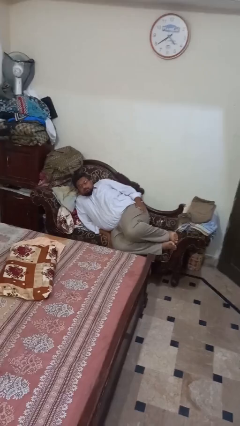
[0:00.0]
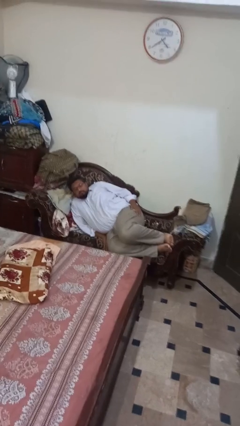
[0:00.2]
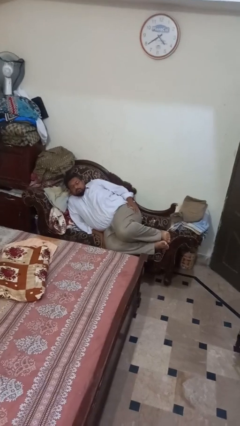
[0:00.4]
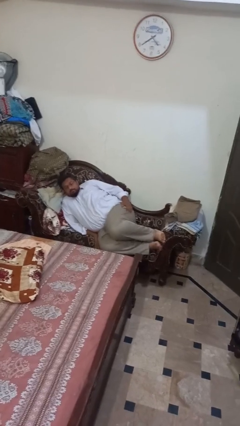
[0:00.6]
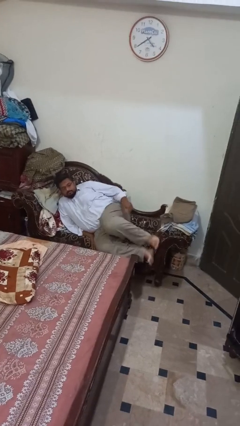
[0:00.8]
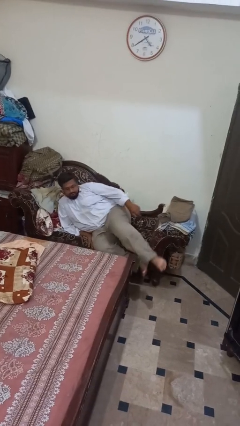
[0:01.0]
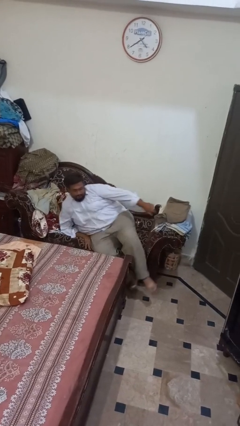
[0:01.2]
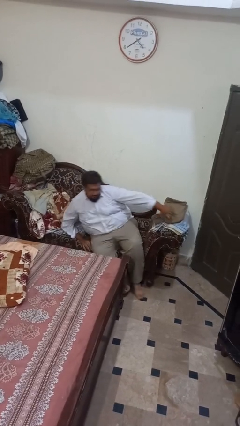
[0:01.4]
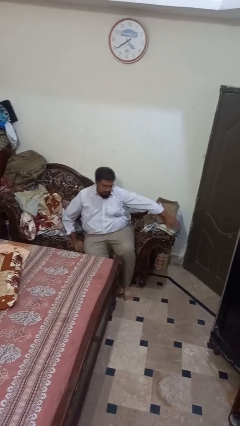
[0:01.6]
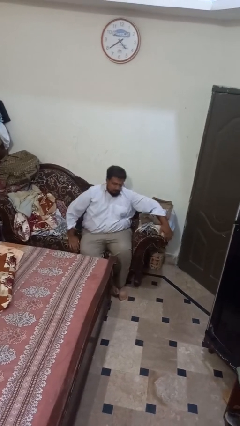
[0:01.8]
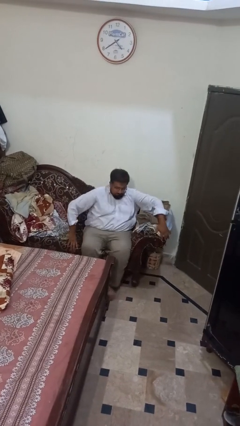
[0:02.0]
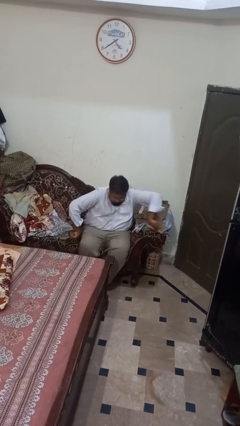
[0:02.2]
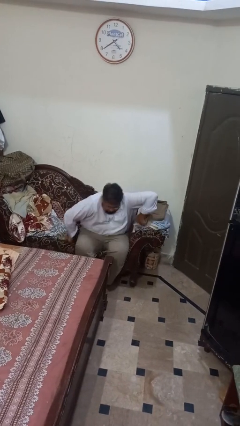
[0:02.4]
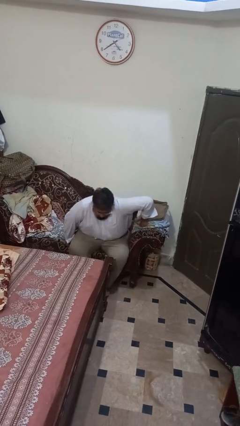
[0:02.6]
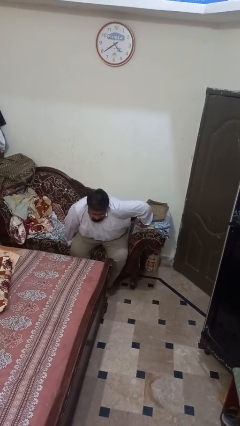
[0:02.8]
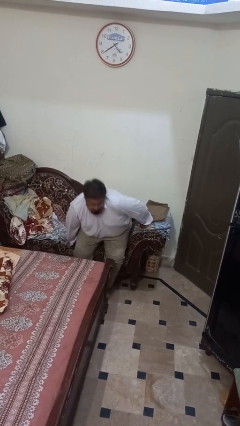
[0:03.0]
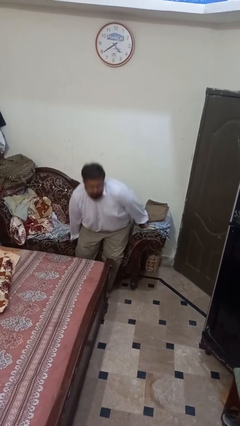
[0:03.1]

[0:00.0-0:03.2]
person stands up

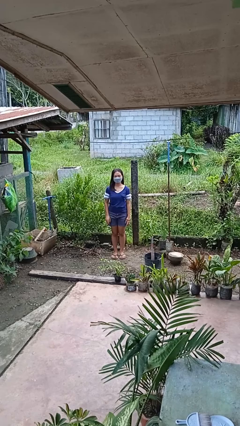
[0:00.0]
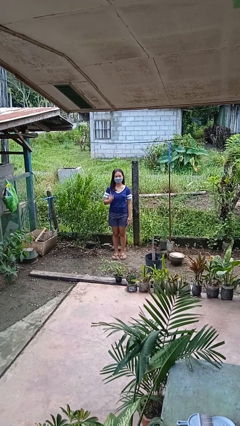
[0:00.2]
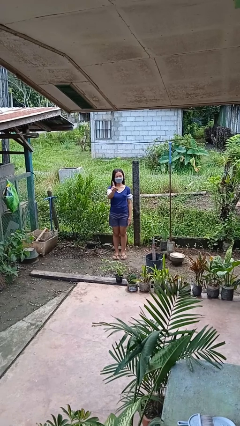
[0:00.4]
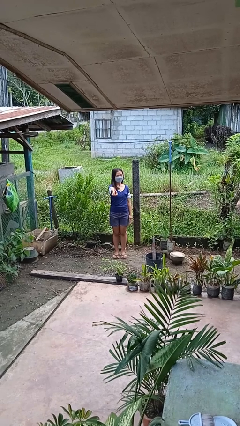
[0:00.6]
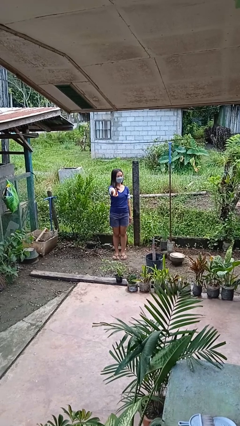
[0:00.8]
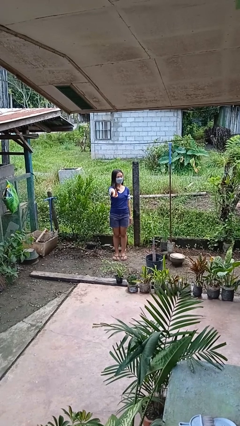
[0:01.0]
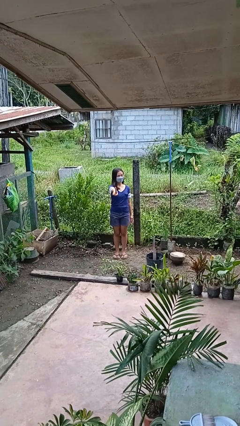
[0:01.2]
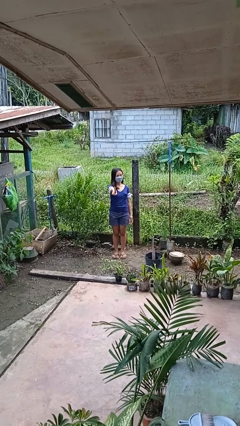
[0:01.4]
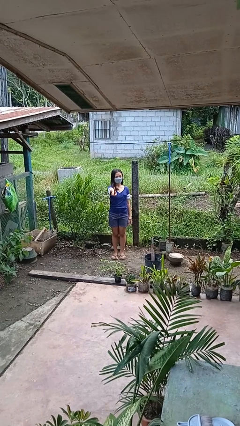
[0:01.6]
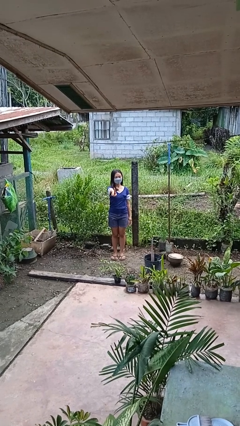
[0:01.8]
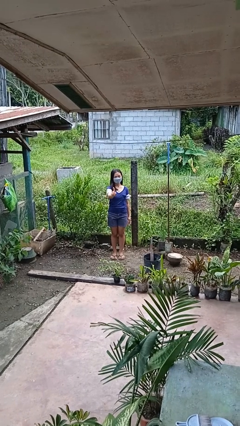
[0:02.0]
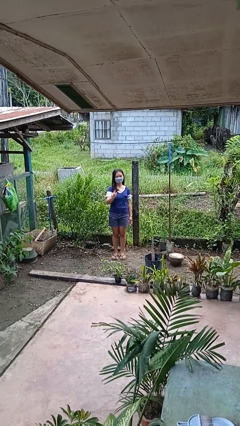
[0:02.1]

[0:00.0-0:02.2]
person gestures number one

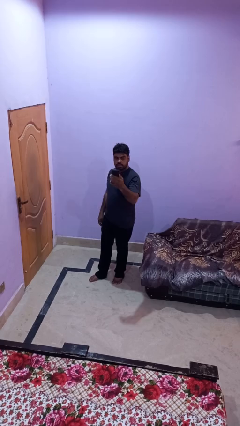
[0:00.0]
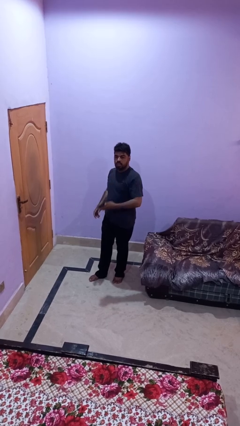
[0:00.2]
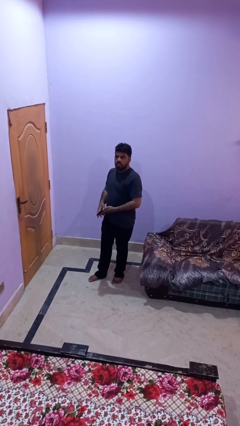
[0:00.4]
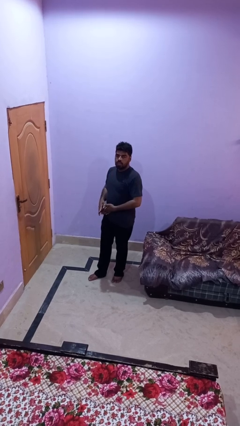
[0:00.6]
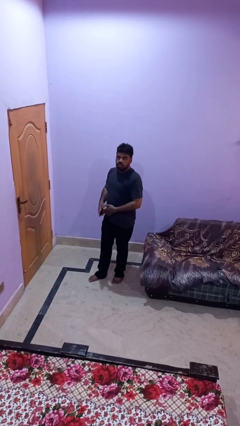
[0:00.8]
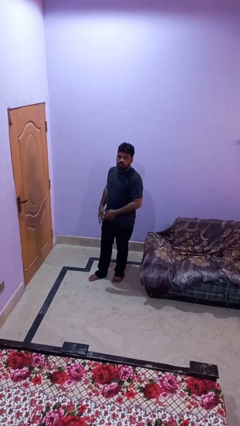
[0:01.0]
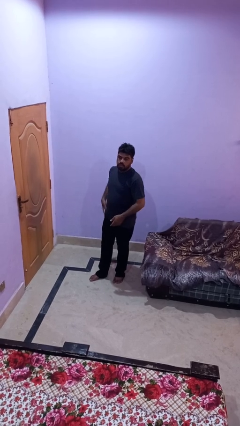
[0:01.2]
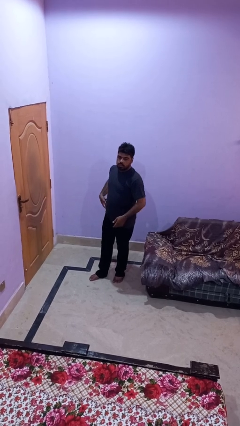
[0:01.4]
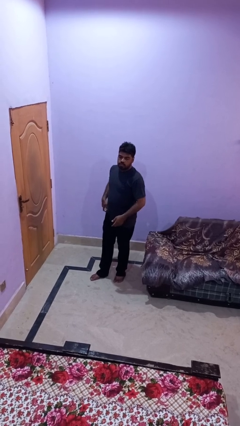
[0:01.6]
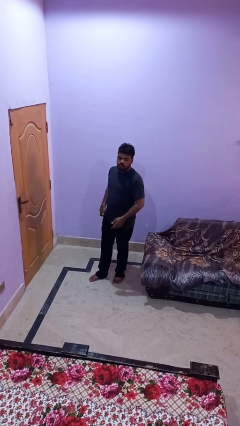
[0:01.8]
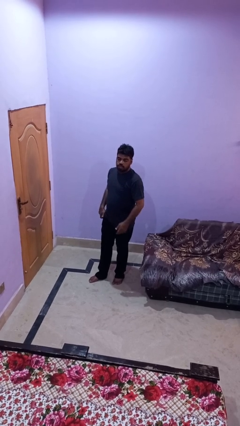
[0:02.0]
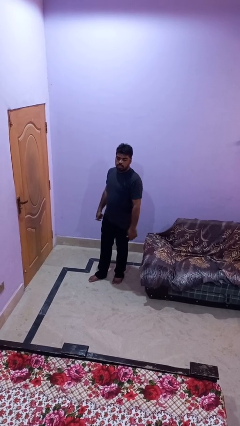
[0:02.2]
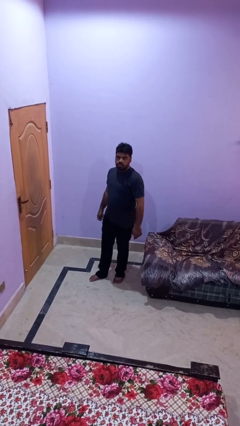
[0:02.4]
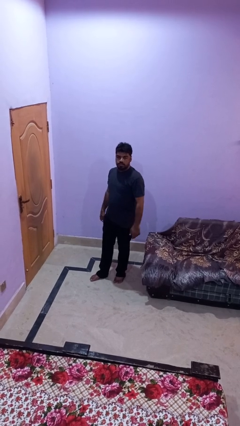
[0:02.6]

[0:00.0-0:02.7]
person puts phone into pocket

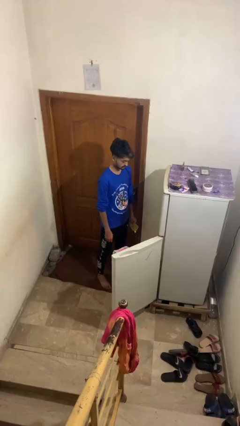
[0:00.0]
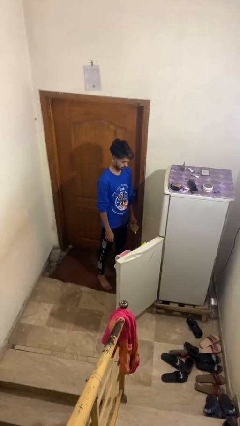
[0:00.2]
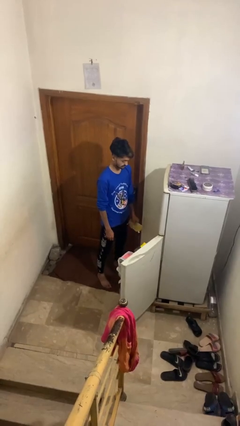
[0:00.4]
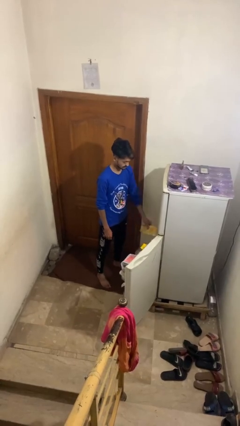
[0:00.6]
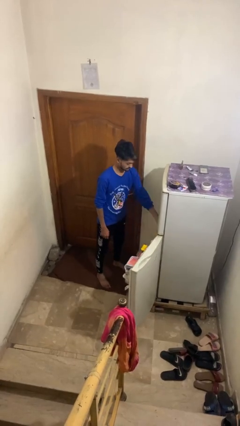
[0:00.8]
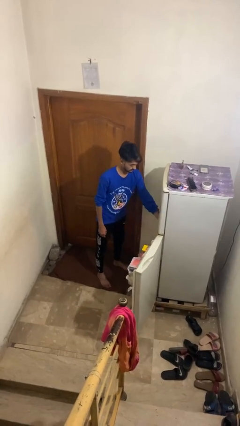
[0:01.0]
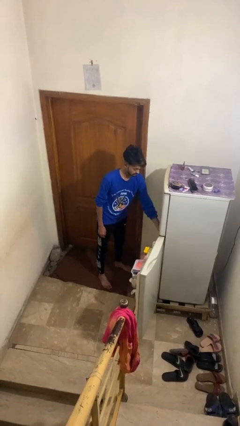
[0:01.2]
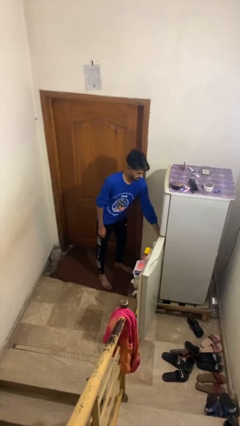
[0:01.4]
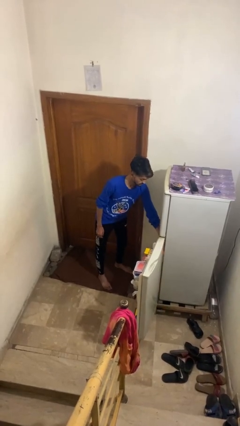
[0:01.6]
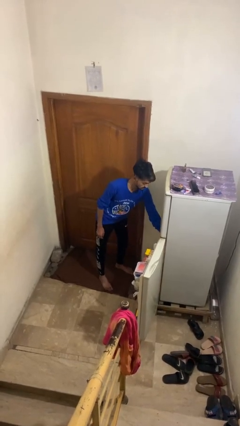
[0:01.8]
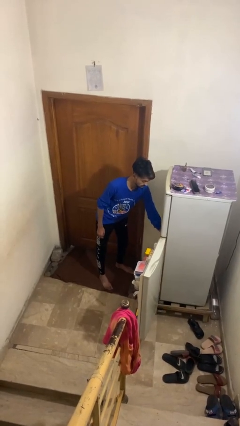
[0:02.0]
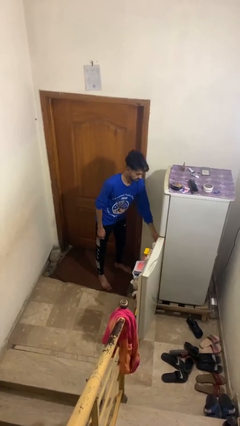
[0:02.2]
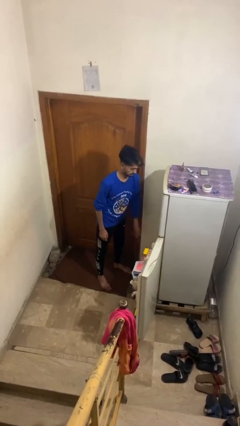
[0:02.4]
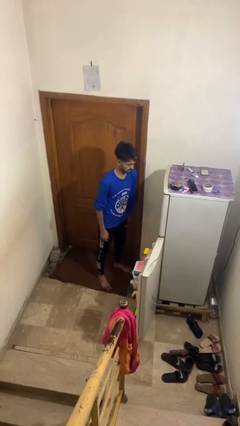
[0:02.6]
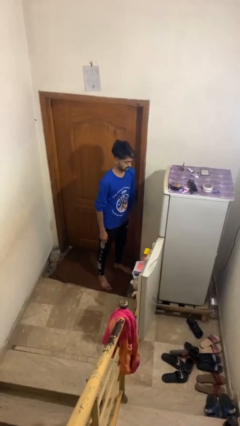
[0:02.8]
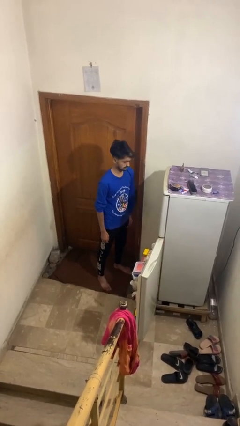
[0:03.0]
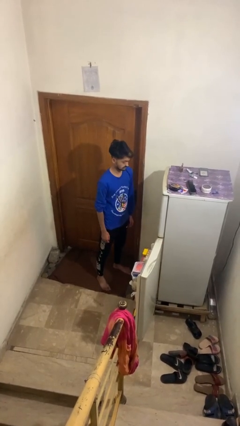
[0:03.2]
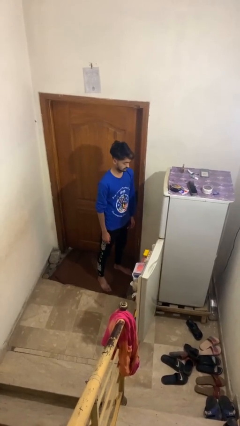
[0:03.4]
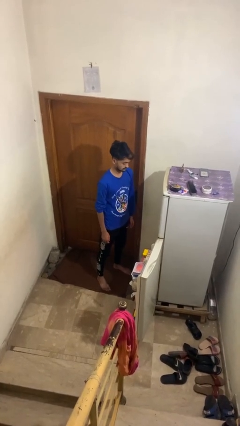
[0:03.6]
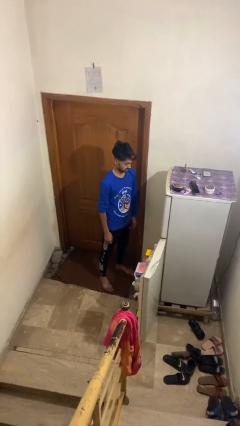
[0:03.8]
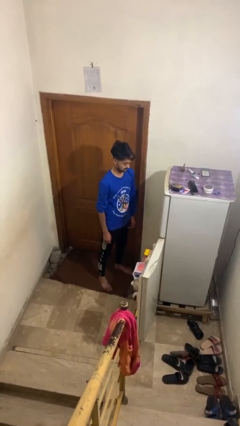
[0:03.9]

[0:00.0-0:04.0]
person puts object into refrigerator

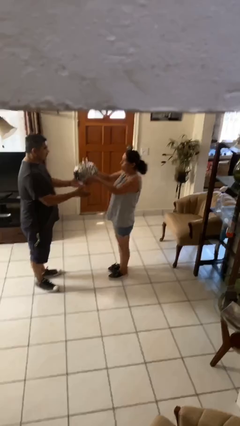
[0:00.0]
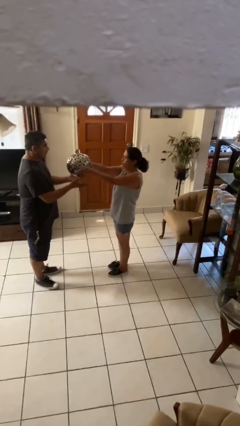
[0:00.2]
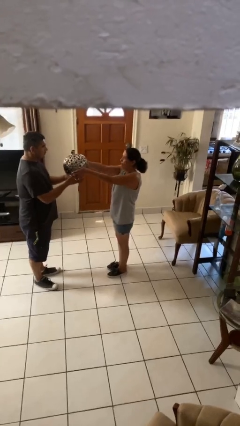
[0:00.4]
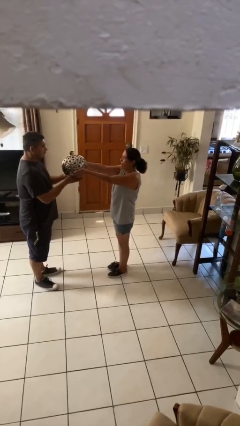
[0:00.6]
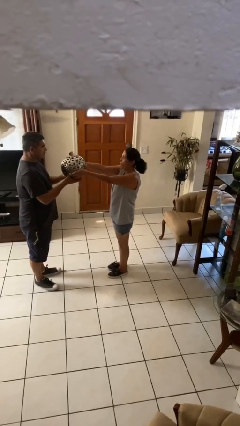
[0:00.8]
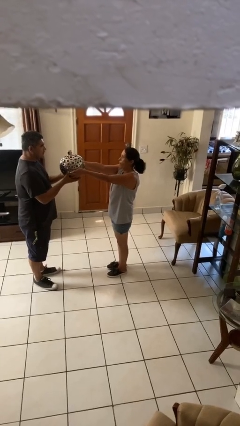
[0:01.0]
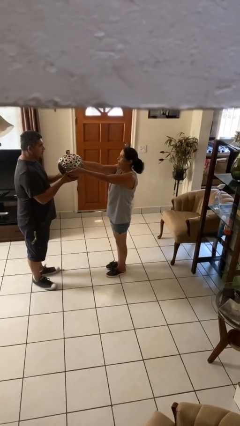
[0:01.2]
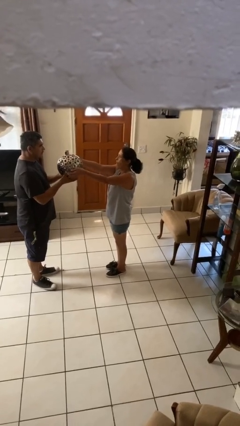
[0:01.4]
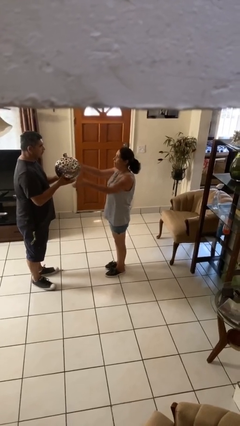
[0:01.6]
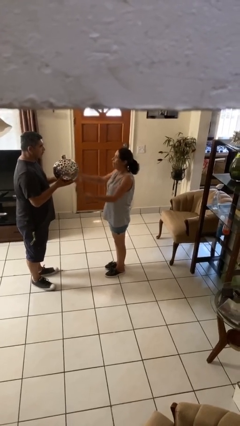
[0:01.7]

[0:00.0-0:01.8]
person transfers object to person

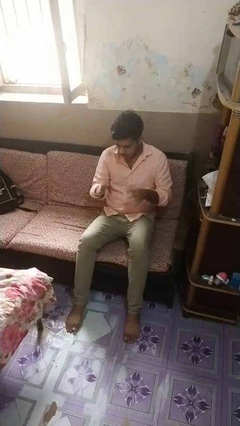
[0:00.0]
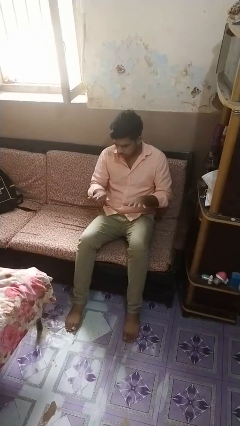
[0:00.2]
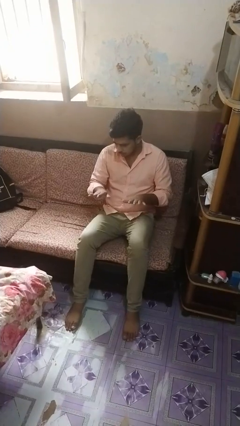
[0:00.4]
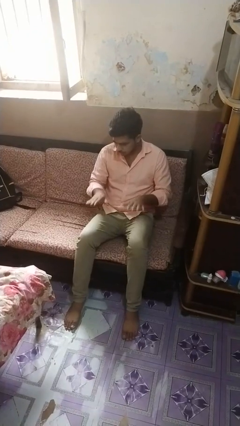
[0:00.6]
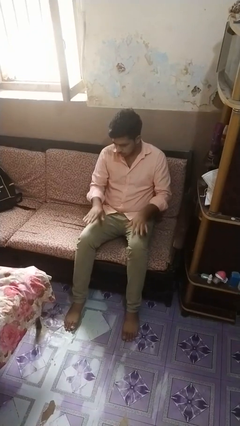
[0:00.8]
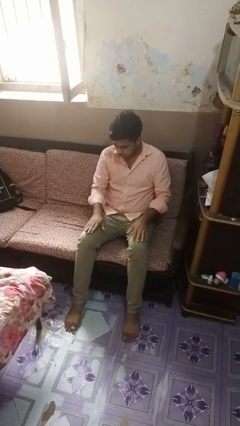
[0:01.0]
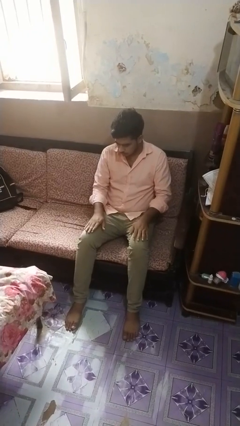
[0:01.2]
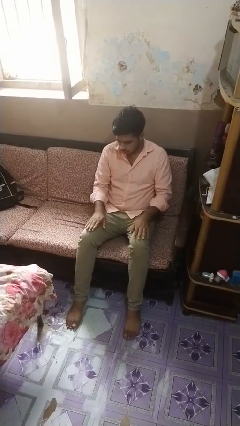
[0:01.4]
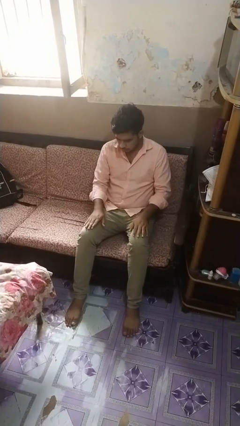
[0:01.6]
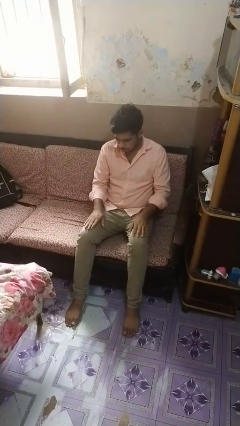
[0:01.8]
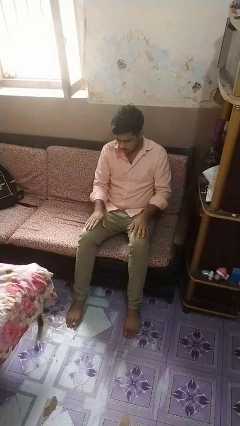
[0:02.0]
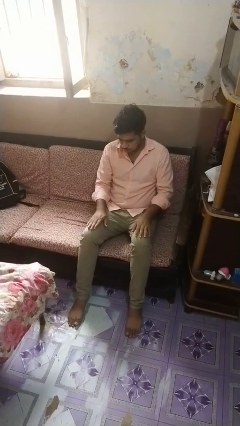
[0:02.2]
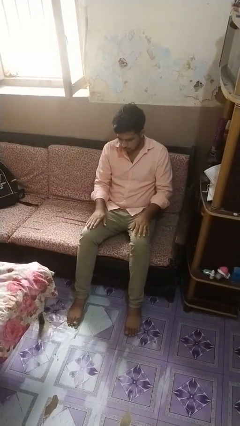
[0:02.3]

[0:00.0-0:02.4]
person looks at hands in lap

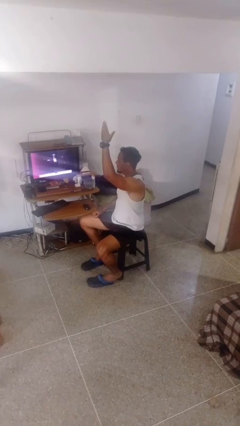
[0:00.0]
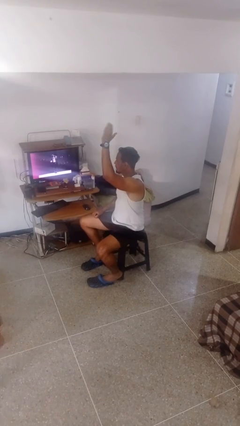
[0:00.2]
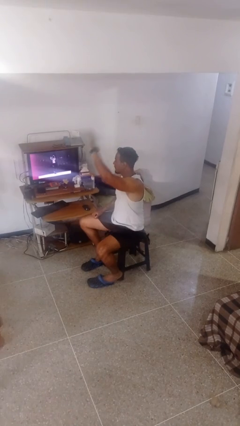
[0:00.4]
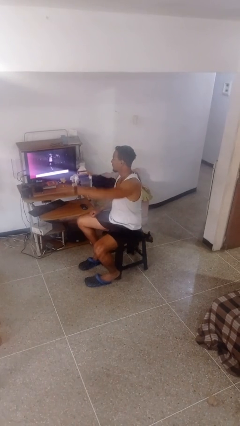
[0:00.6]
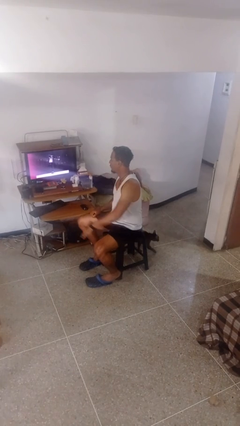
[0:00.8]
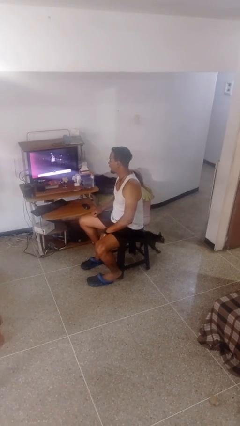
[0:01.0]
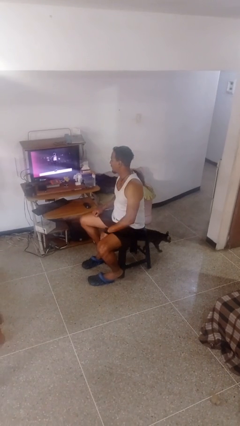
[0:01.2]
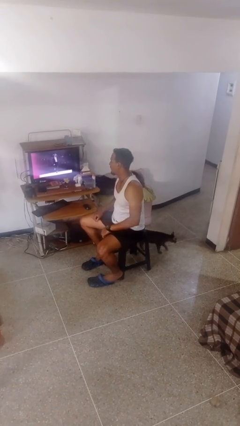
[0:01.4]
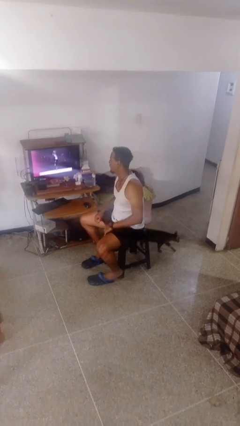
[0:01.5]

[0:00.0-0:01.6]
person gestures swipe down
